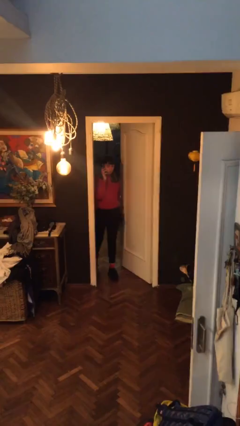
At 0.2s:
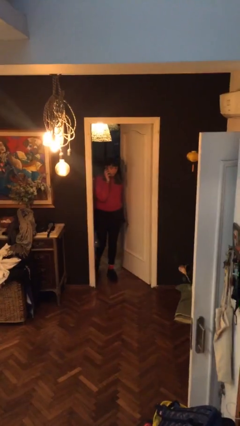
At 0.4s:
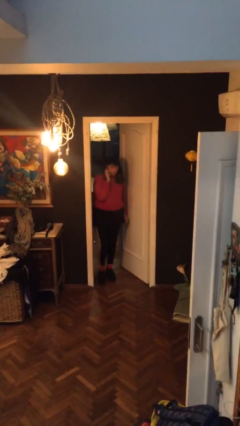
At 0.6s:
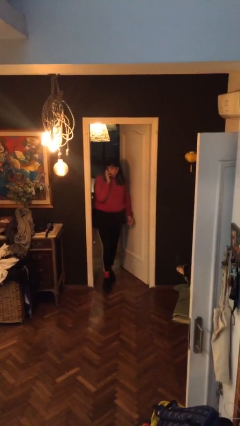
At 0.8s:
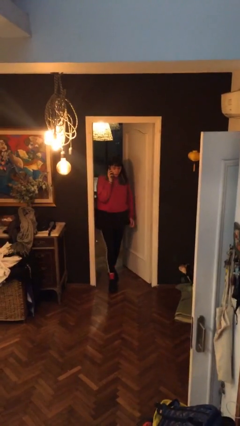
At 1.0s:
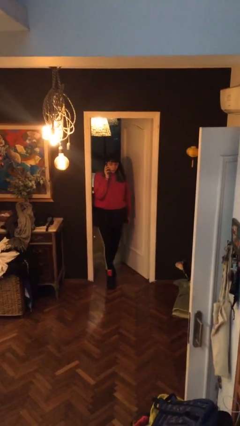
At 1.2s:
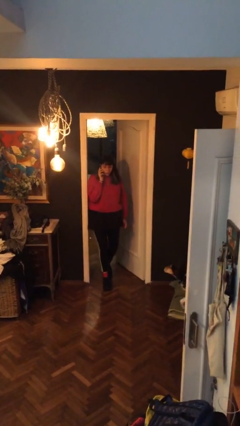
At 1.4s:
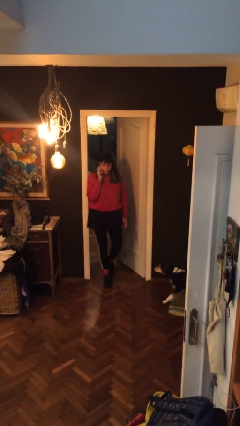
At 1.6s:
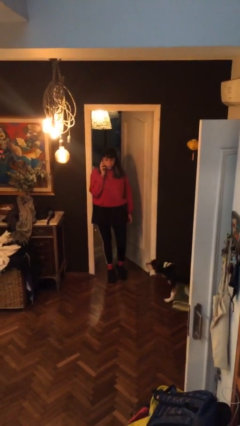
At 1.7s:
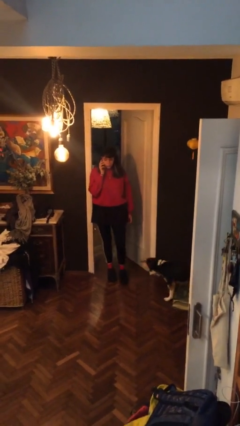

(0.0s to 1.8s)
person enters scene through structure

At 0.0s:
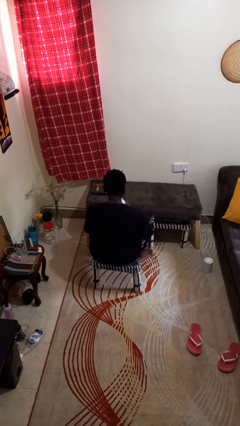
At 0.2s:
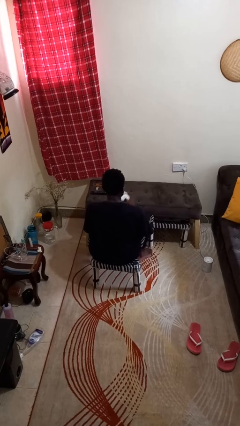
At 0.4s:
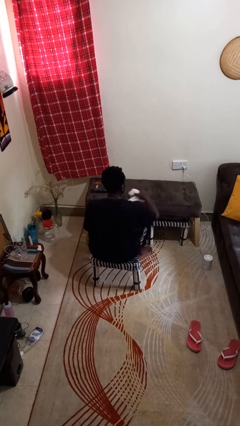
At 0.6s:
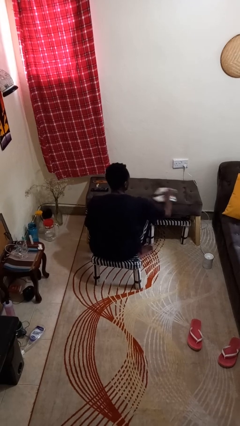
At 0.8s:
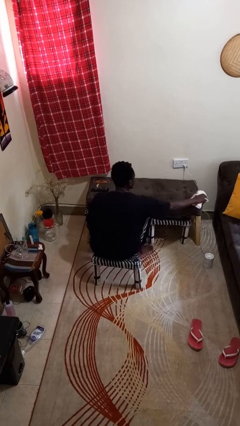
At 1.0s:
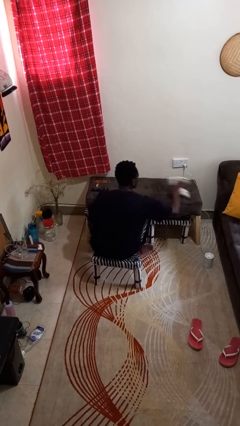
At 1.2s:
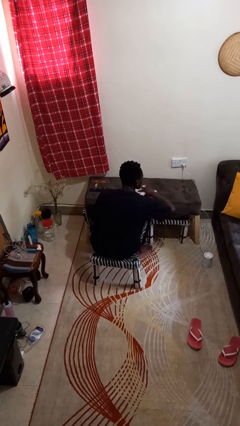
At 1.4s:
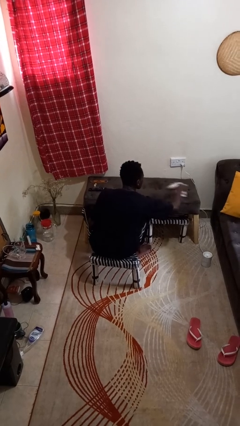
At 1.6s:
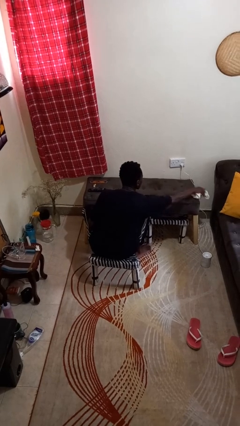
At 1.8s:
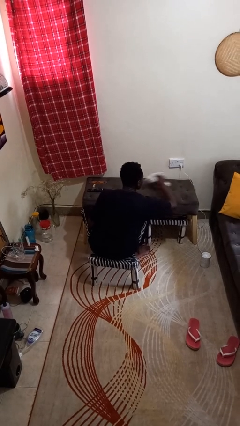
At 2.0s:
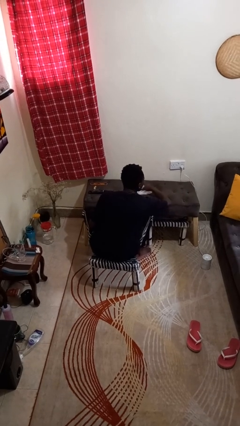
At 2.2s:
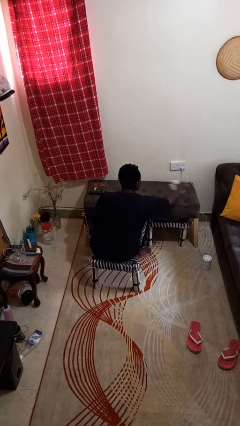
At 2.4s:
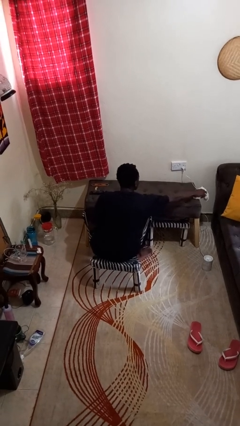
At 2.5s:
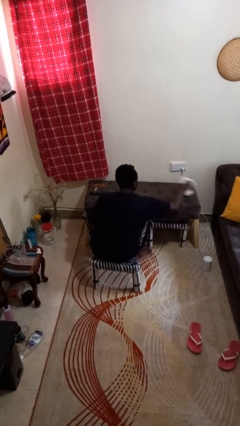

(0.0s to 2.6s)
person cleans table with rag

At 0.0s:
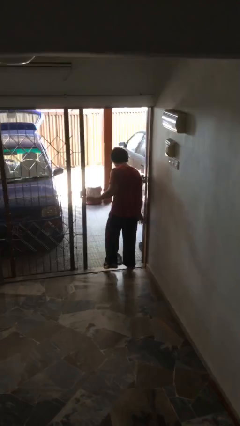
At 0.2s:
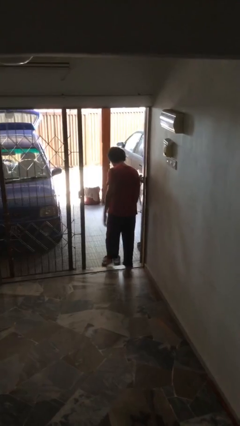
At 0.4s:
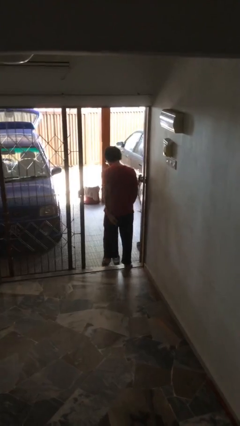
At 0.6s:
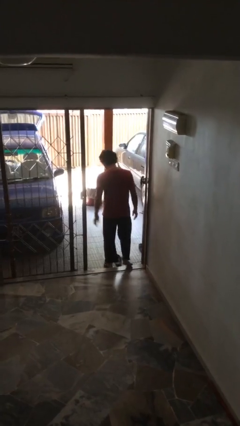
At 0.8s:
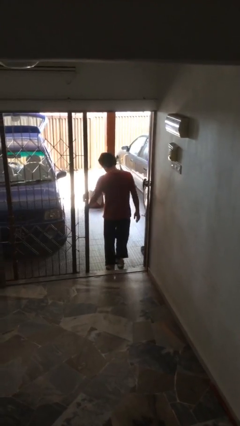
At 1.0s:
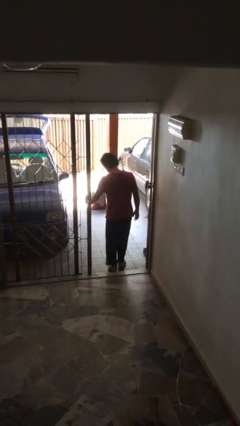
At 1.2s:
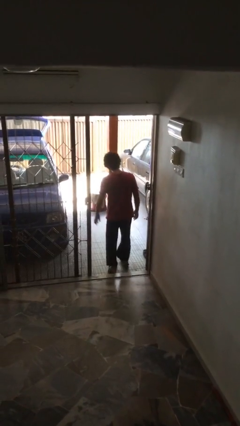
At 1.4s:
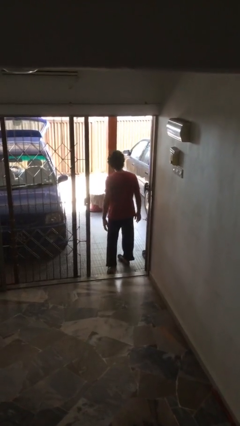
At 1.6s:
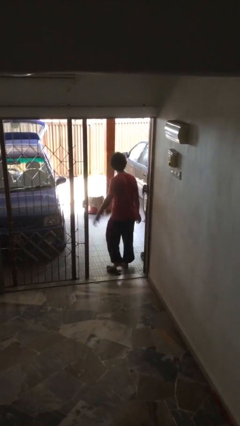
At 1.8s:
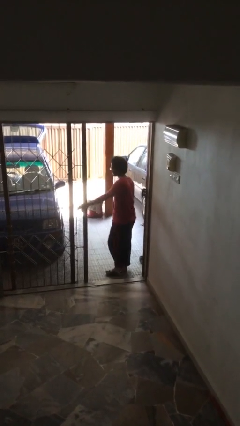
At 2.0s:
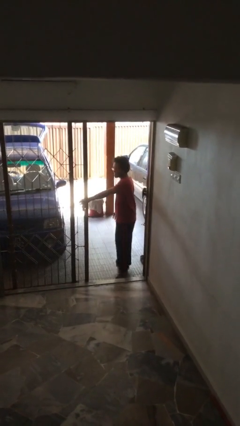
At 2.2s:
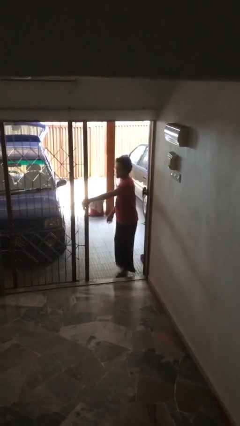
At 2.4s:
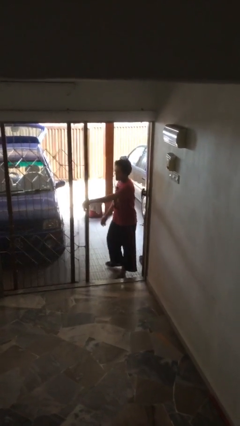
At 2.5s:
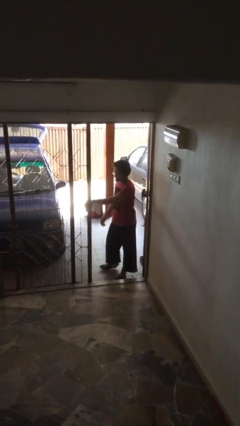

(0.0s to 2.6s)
person exits scene through structure

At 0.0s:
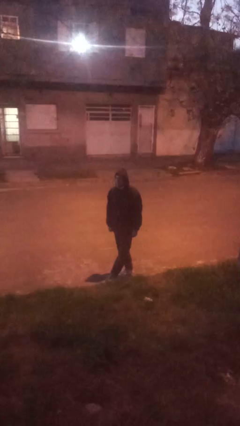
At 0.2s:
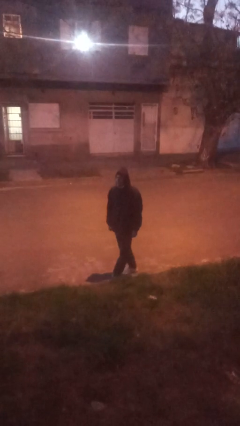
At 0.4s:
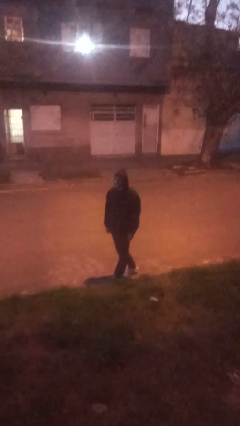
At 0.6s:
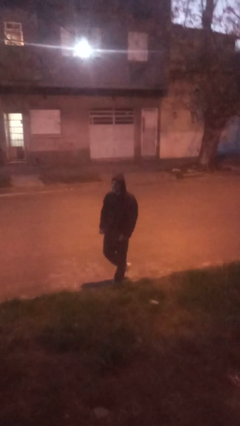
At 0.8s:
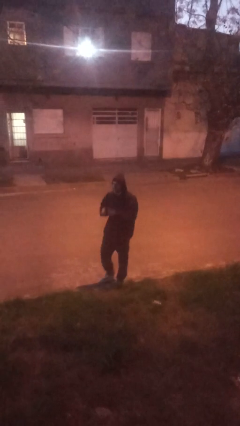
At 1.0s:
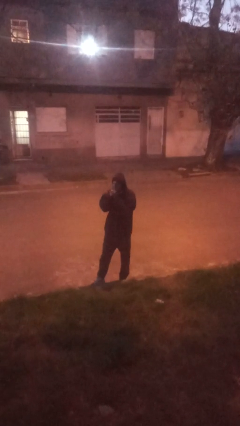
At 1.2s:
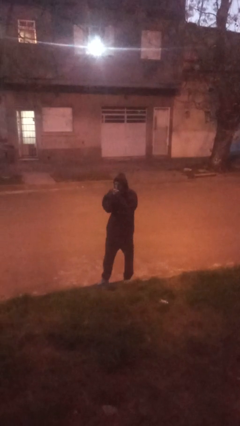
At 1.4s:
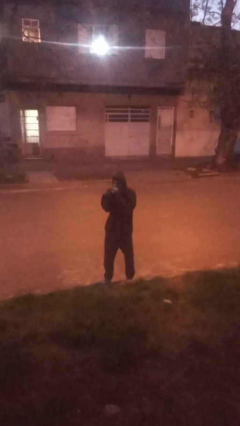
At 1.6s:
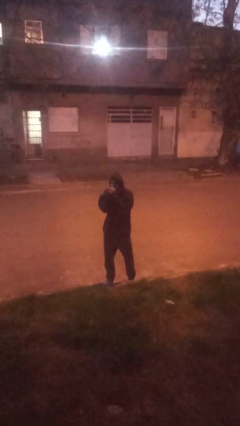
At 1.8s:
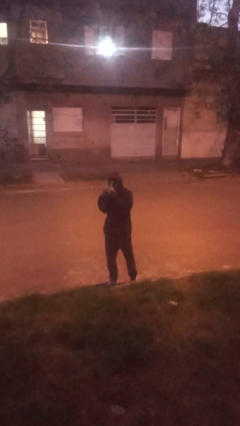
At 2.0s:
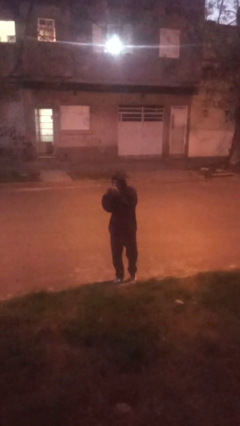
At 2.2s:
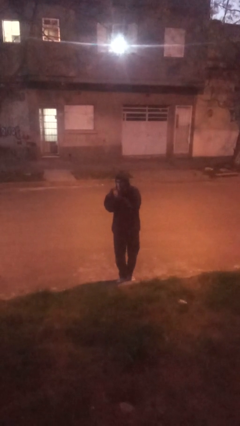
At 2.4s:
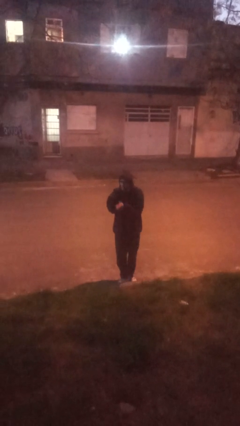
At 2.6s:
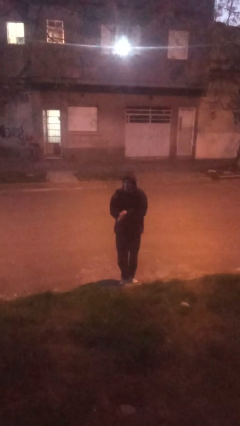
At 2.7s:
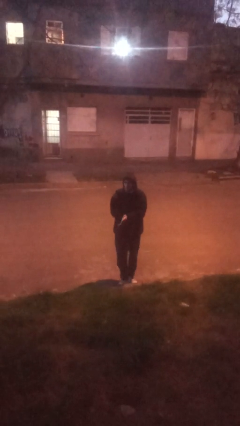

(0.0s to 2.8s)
person blows into hands

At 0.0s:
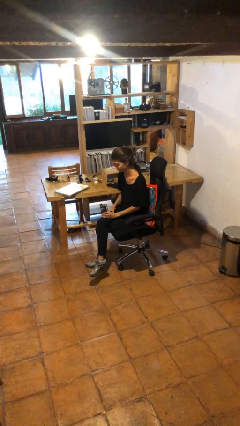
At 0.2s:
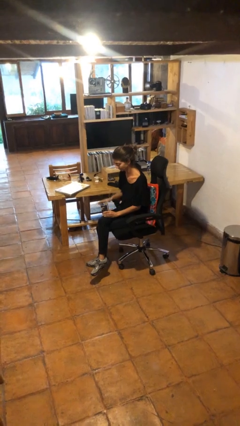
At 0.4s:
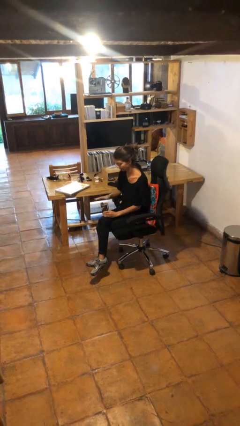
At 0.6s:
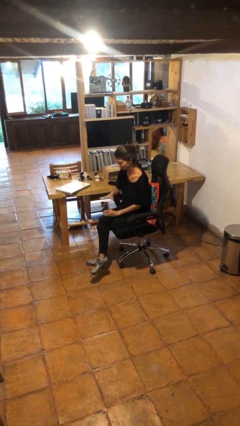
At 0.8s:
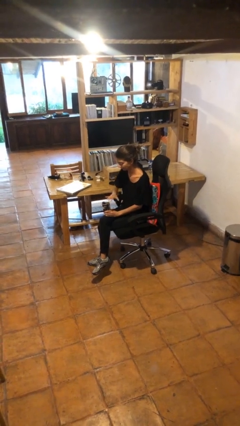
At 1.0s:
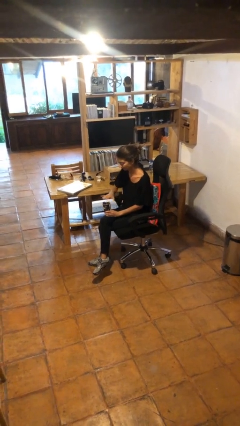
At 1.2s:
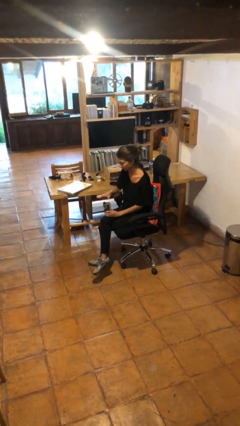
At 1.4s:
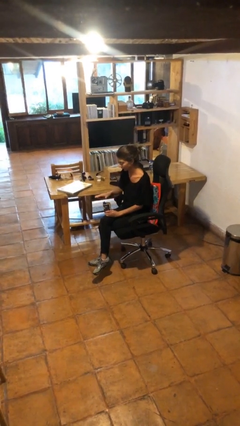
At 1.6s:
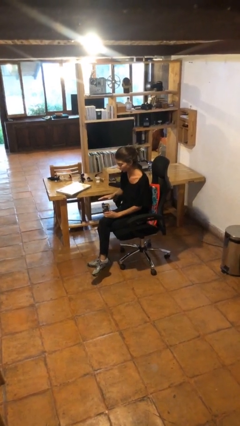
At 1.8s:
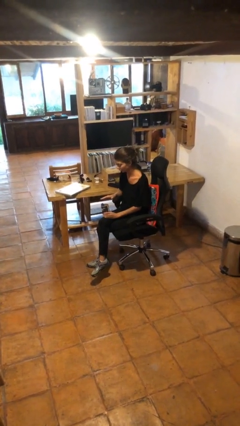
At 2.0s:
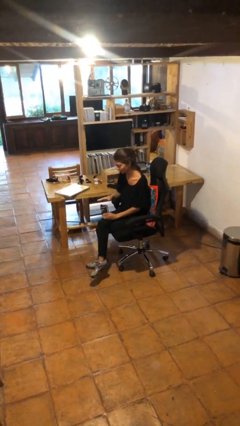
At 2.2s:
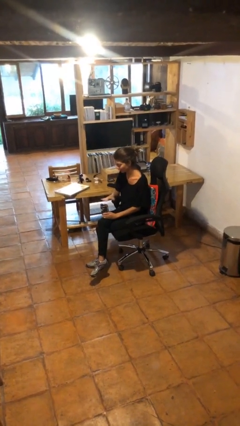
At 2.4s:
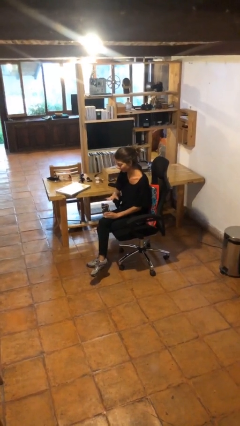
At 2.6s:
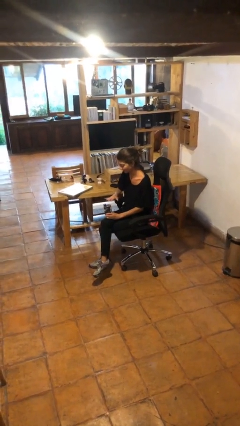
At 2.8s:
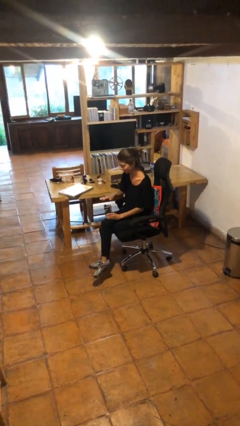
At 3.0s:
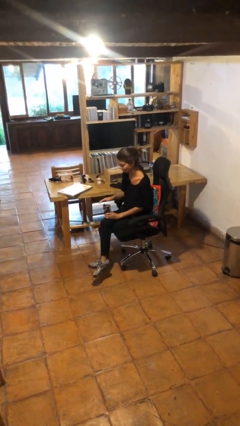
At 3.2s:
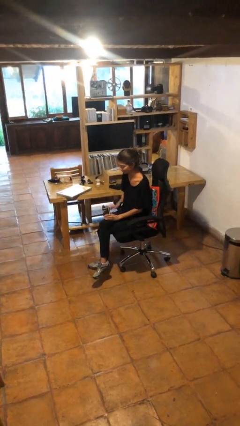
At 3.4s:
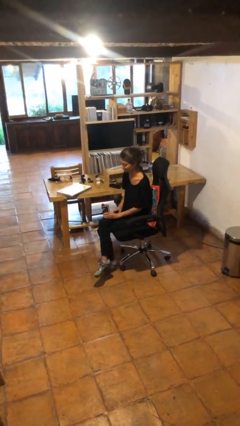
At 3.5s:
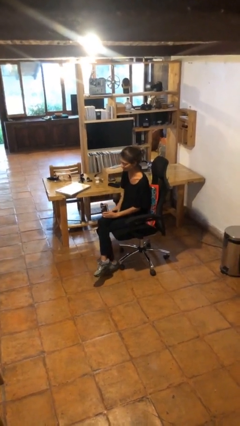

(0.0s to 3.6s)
person waves hand over object

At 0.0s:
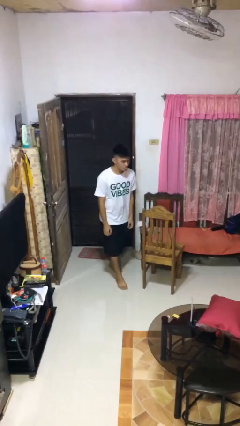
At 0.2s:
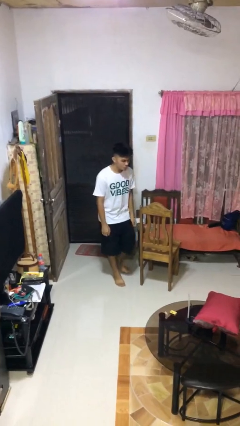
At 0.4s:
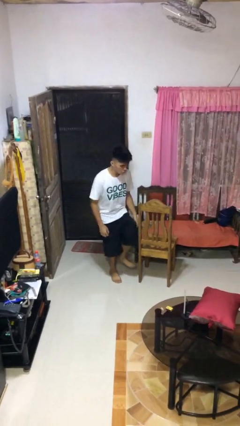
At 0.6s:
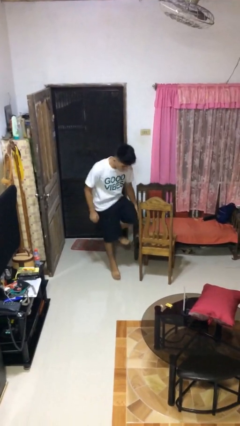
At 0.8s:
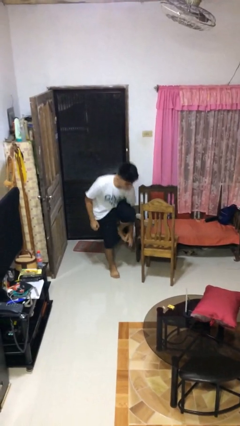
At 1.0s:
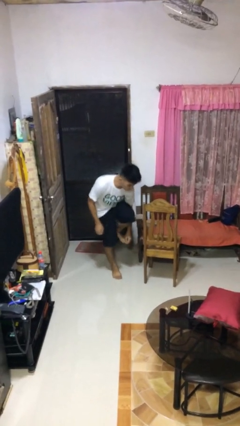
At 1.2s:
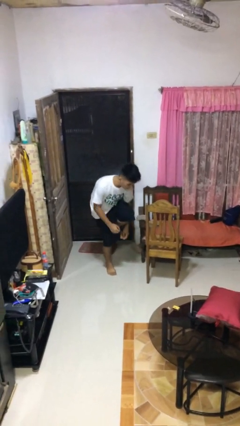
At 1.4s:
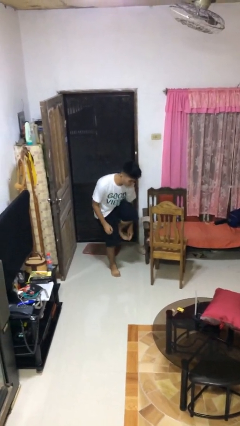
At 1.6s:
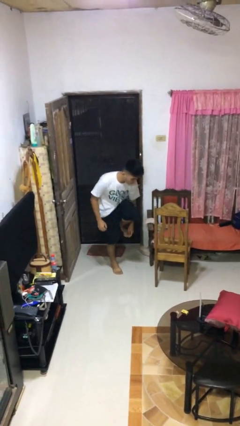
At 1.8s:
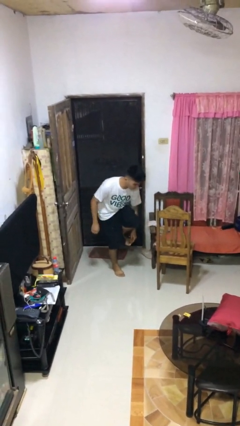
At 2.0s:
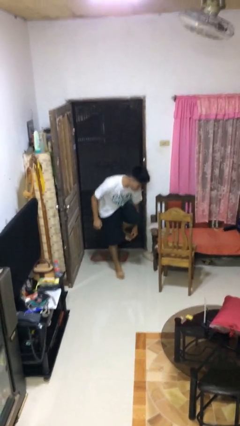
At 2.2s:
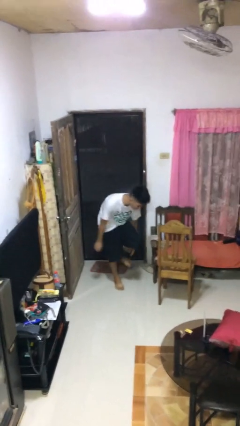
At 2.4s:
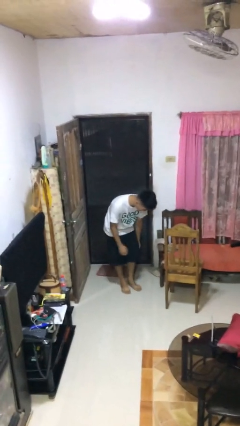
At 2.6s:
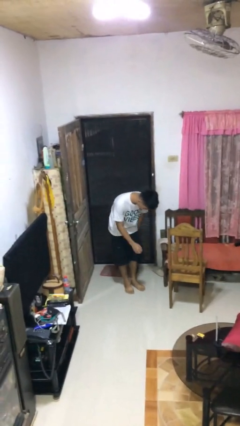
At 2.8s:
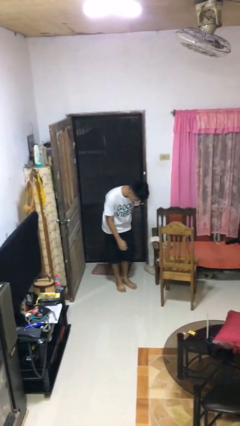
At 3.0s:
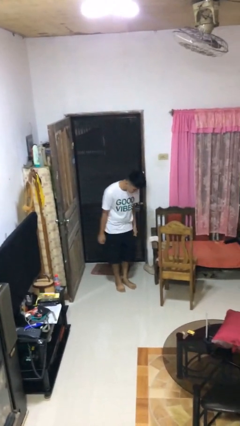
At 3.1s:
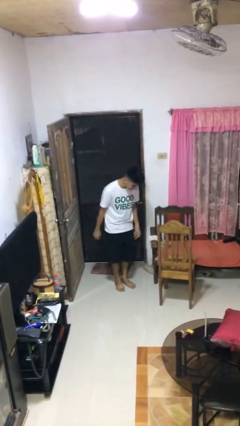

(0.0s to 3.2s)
person stubs toe

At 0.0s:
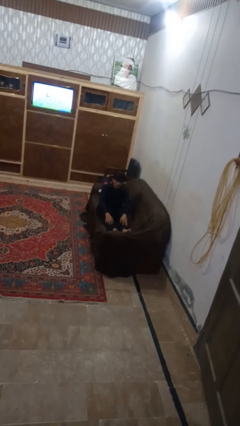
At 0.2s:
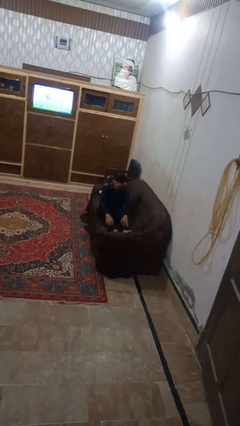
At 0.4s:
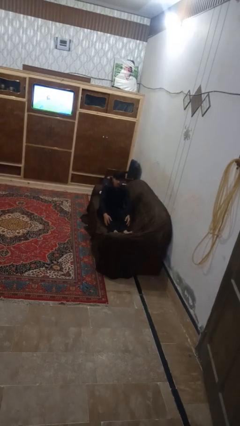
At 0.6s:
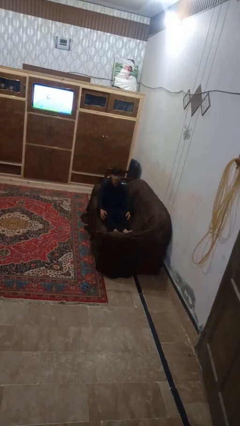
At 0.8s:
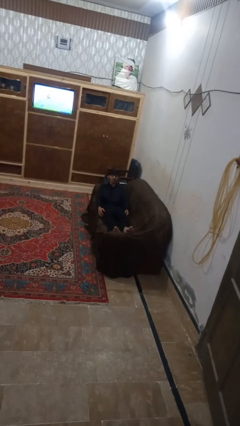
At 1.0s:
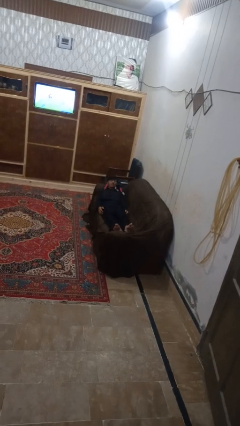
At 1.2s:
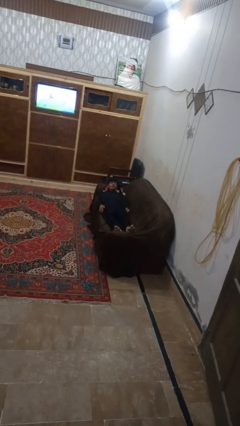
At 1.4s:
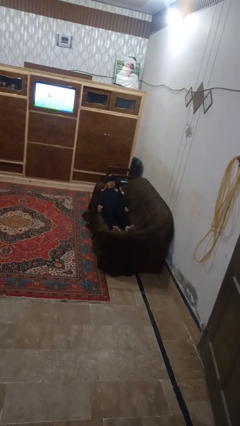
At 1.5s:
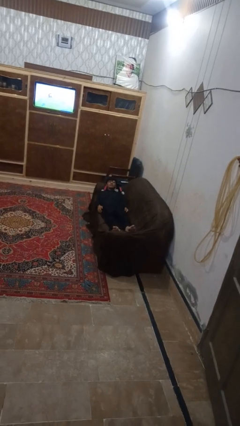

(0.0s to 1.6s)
person lies down on couch
